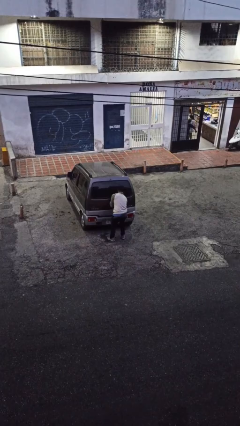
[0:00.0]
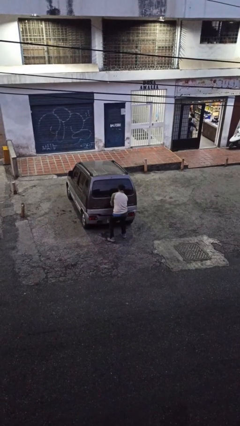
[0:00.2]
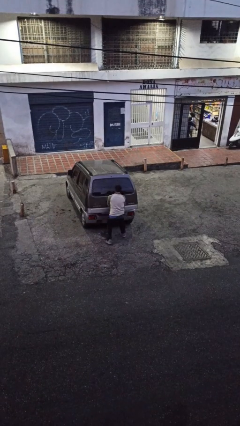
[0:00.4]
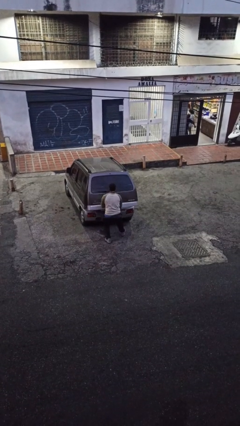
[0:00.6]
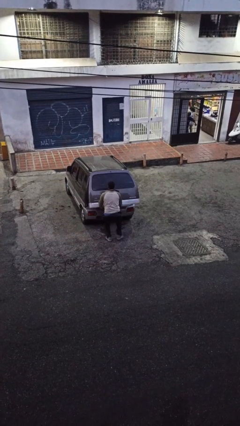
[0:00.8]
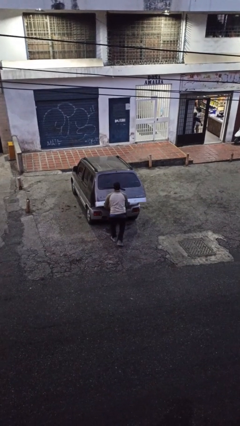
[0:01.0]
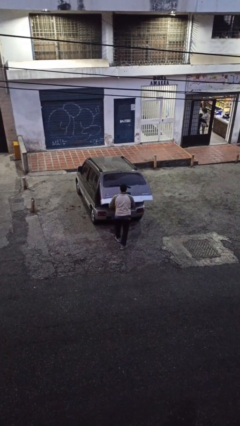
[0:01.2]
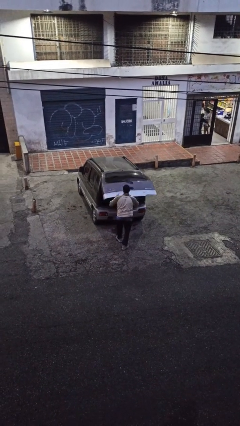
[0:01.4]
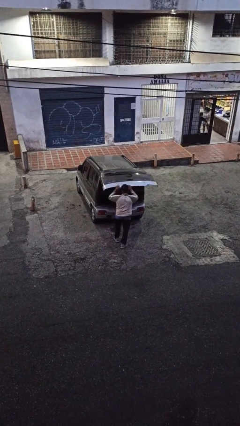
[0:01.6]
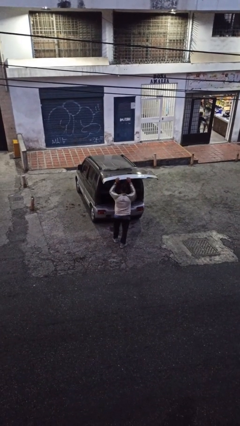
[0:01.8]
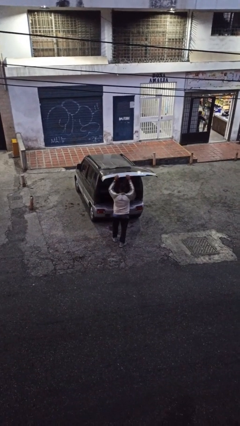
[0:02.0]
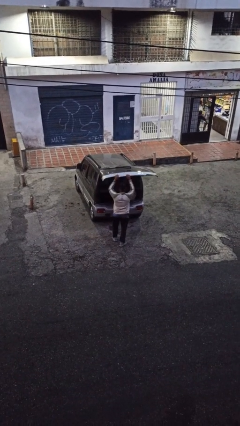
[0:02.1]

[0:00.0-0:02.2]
person opens car trunk

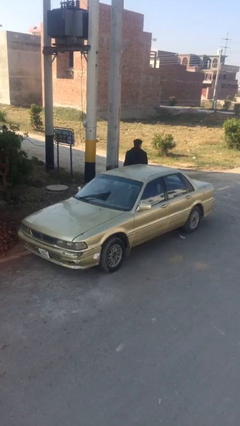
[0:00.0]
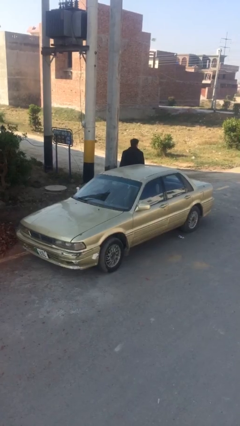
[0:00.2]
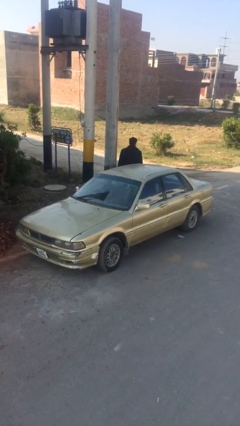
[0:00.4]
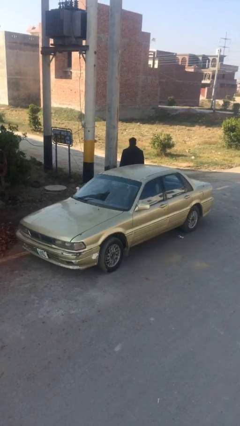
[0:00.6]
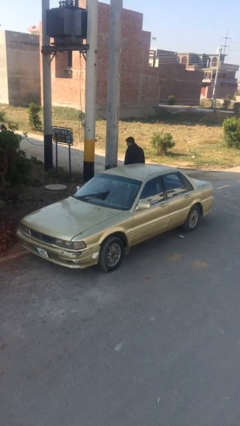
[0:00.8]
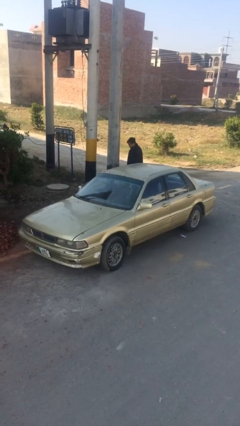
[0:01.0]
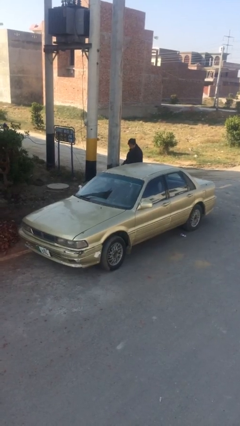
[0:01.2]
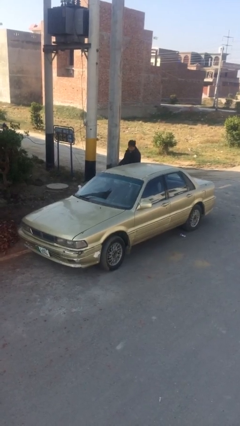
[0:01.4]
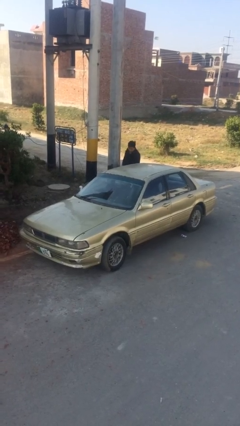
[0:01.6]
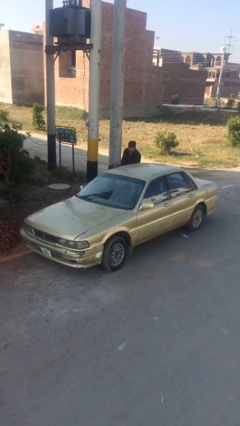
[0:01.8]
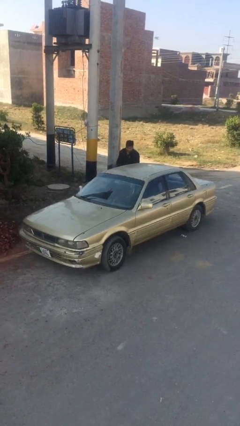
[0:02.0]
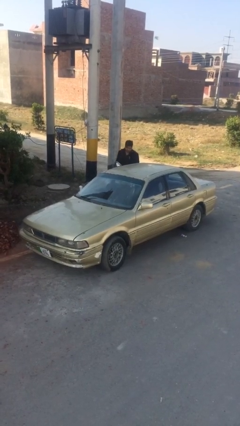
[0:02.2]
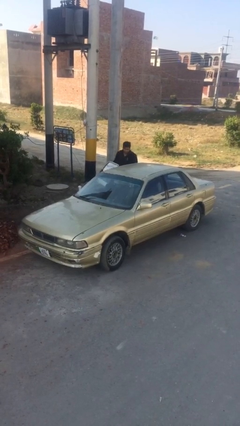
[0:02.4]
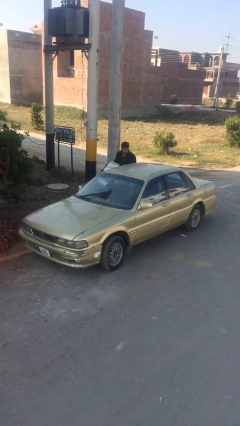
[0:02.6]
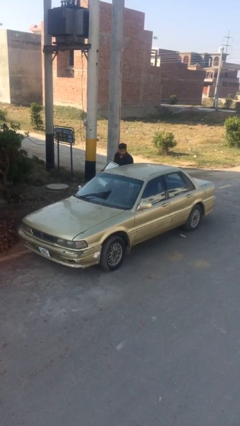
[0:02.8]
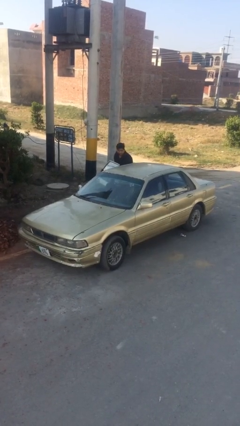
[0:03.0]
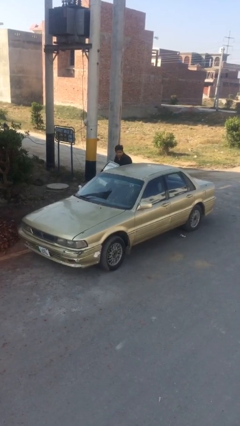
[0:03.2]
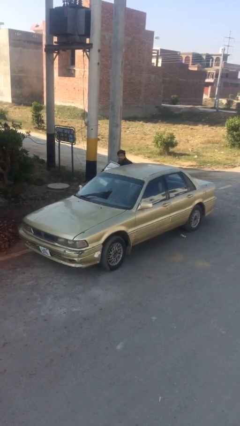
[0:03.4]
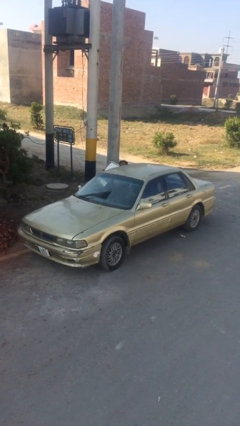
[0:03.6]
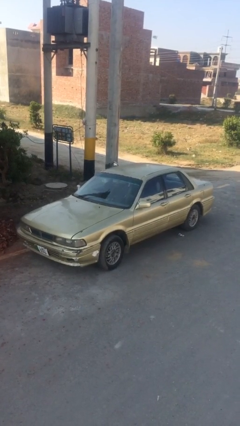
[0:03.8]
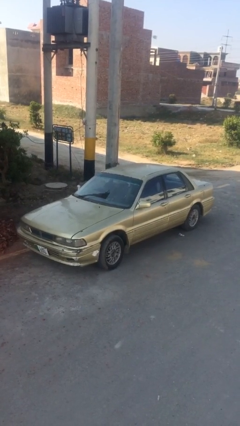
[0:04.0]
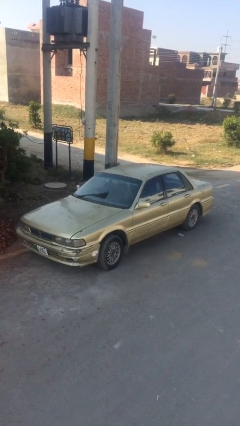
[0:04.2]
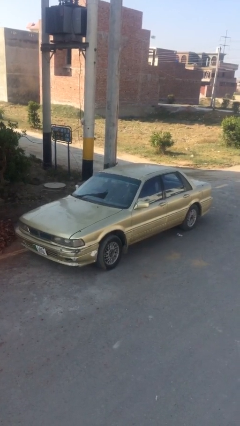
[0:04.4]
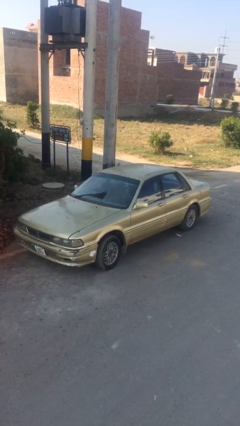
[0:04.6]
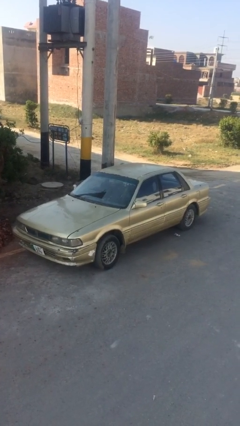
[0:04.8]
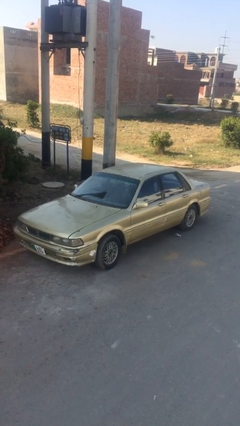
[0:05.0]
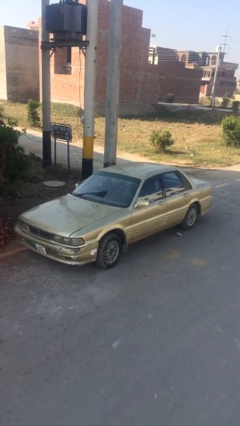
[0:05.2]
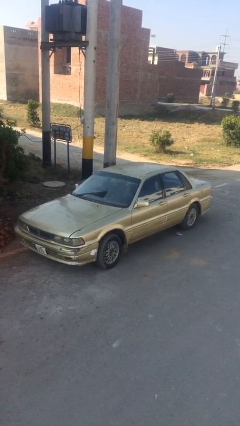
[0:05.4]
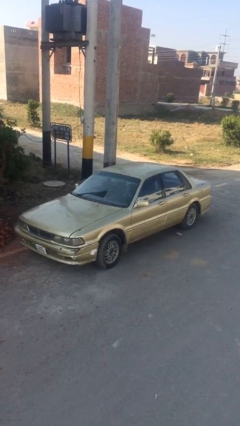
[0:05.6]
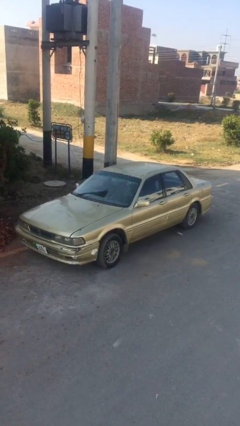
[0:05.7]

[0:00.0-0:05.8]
car picks up person

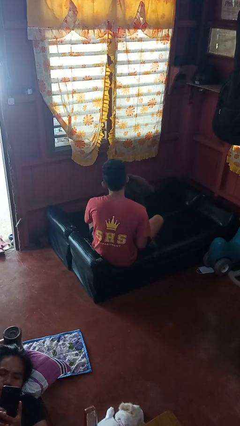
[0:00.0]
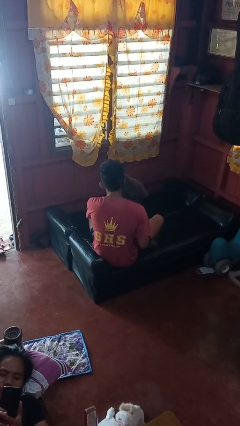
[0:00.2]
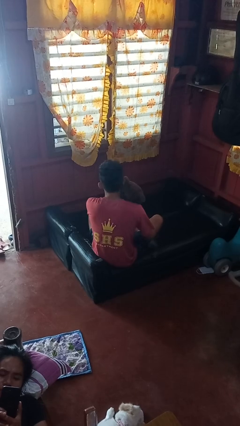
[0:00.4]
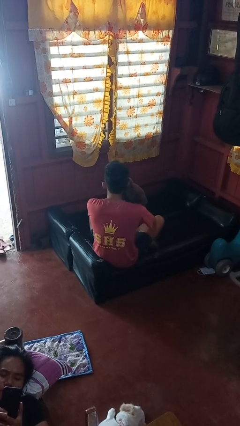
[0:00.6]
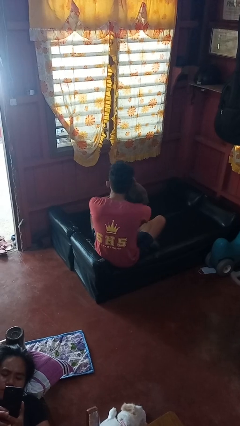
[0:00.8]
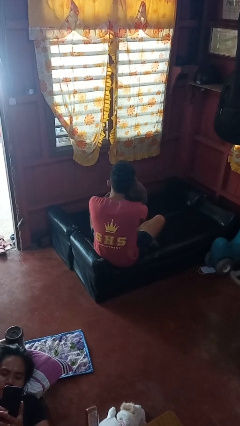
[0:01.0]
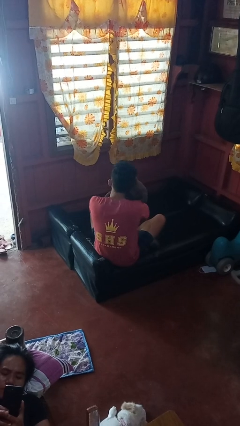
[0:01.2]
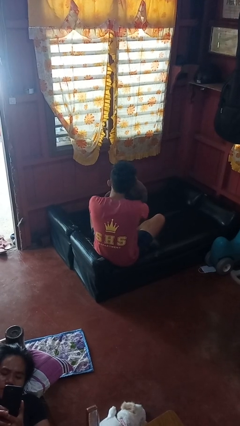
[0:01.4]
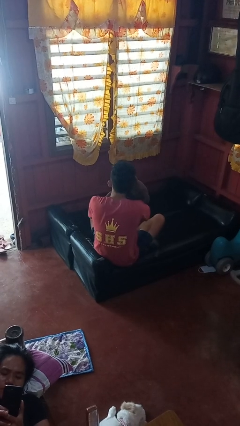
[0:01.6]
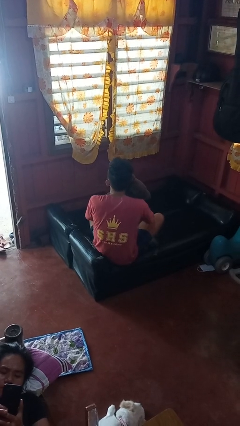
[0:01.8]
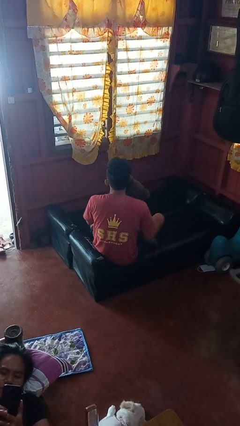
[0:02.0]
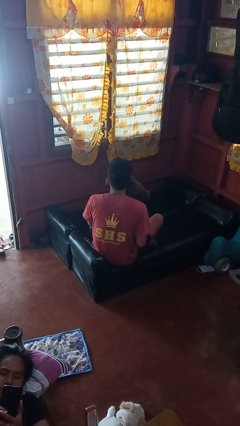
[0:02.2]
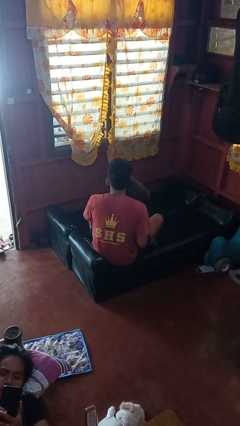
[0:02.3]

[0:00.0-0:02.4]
person hugs stuffed animal

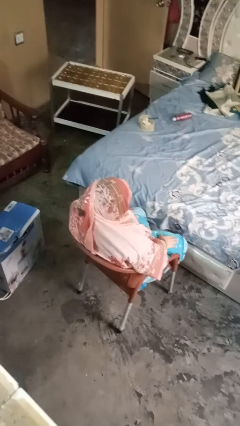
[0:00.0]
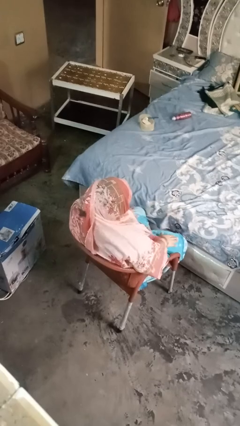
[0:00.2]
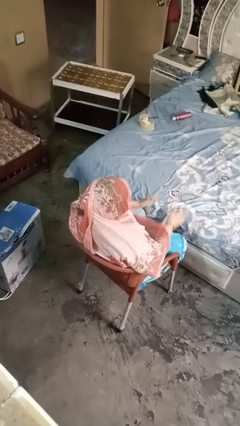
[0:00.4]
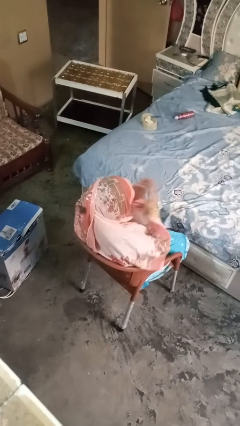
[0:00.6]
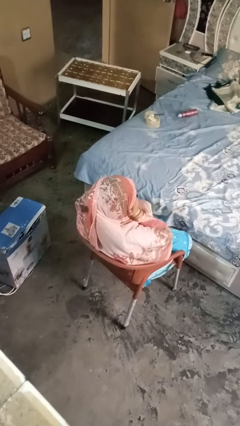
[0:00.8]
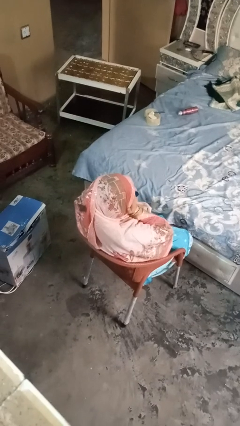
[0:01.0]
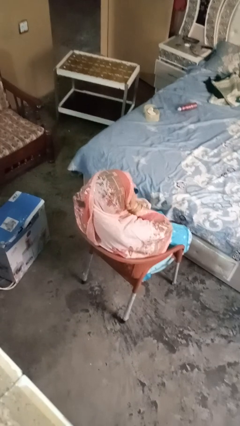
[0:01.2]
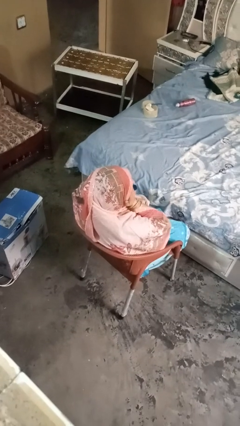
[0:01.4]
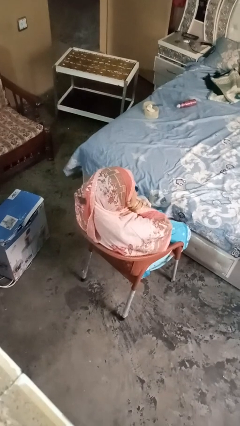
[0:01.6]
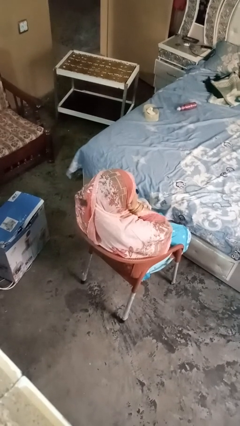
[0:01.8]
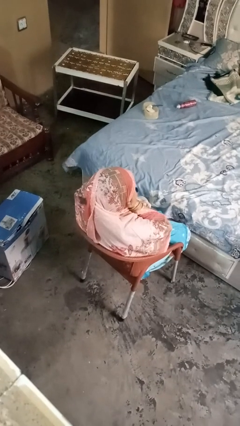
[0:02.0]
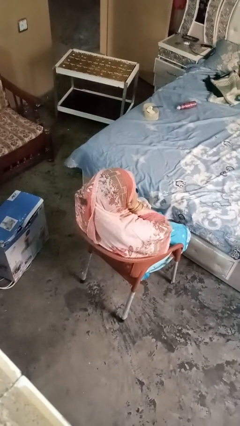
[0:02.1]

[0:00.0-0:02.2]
person covers face with hands

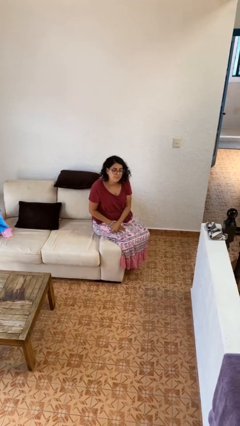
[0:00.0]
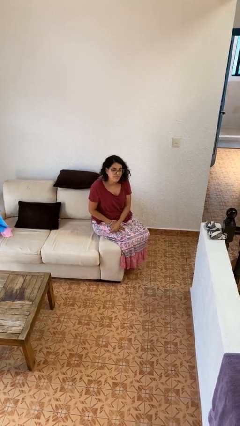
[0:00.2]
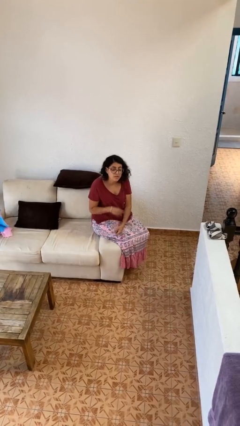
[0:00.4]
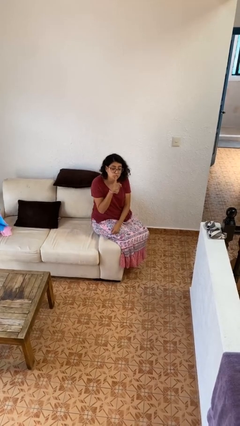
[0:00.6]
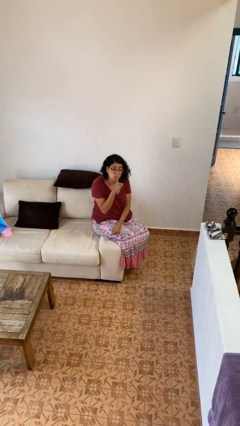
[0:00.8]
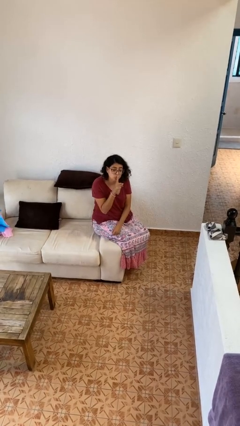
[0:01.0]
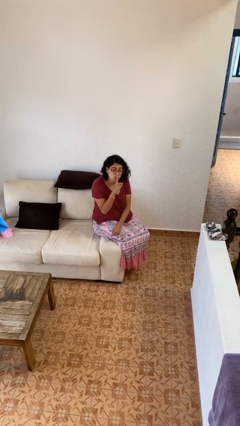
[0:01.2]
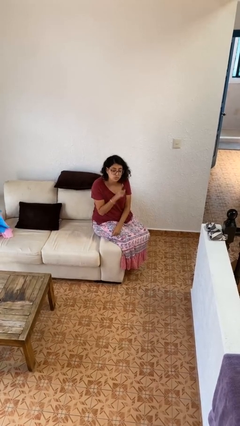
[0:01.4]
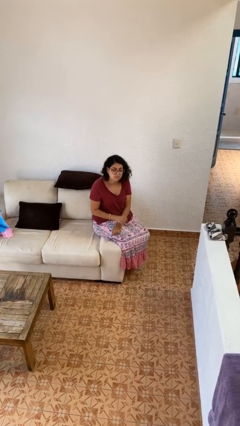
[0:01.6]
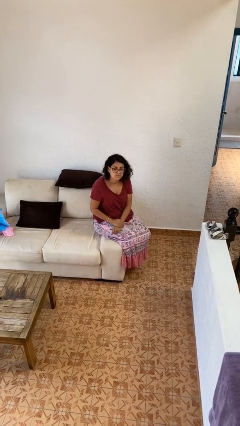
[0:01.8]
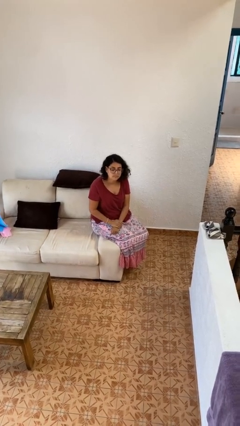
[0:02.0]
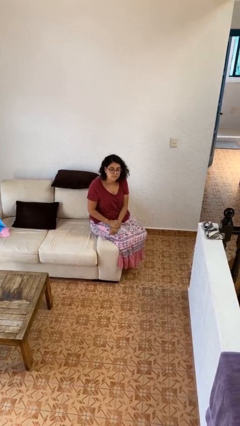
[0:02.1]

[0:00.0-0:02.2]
person gestures be quiet

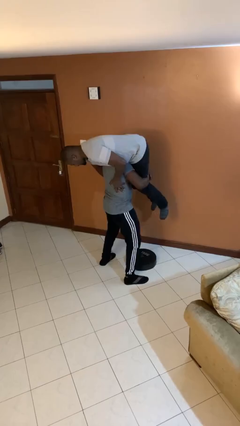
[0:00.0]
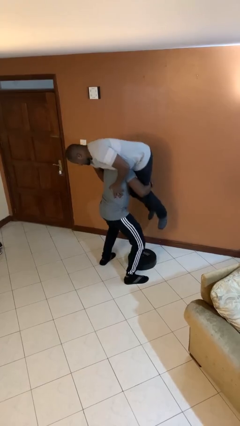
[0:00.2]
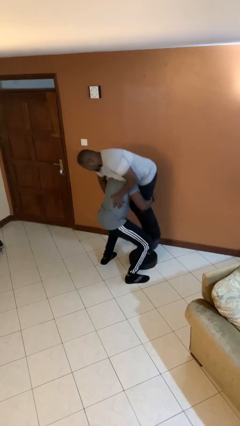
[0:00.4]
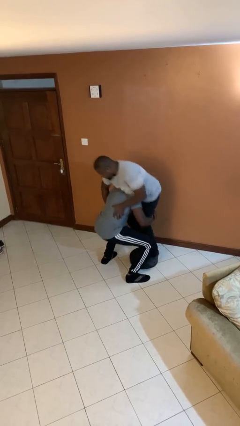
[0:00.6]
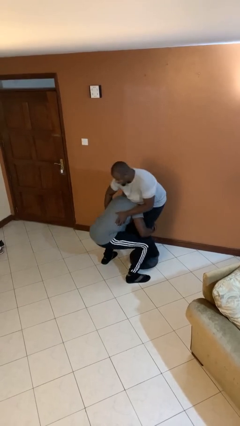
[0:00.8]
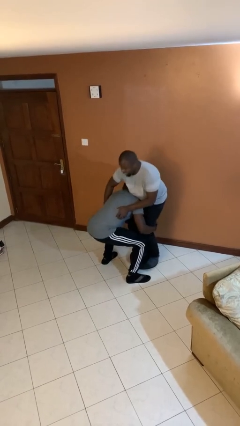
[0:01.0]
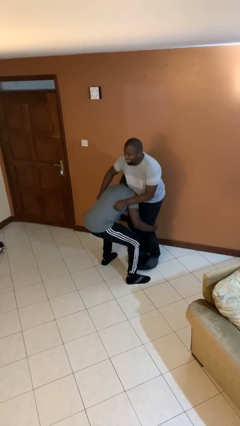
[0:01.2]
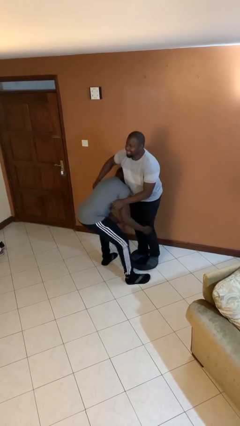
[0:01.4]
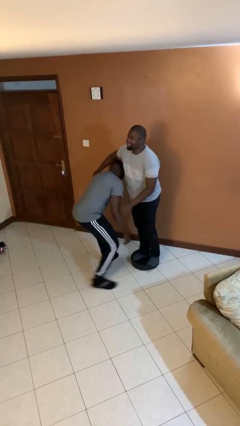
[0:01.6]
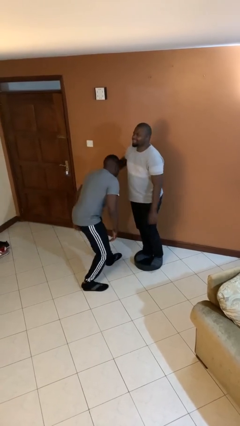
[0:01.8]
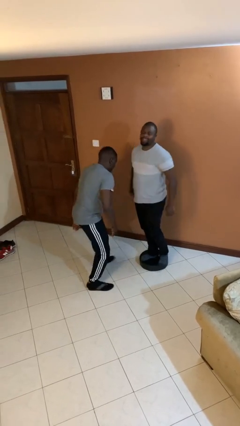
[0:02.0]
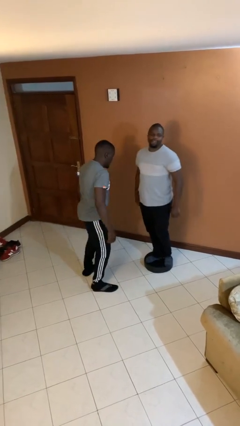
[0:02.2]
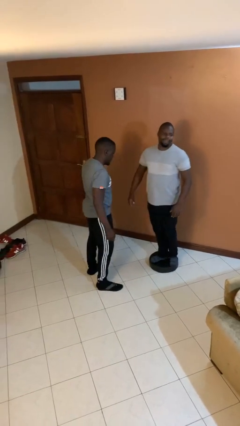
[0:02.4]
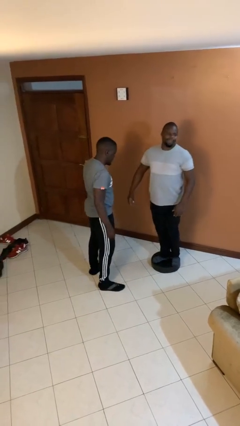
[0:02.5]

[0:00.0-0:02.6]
person puts down person
